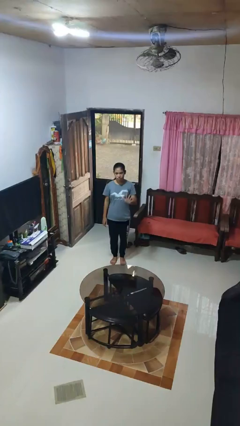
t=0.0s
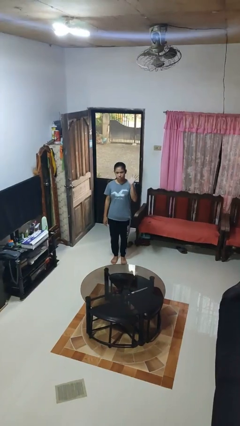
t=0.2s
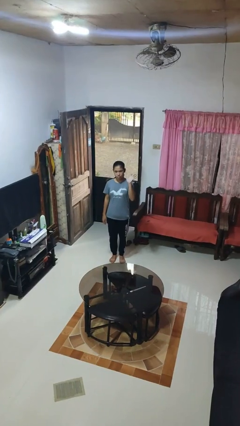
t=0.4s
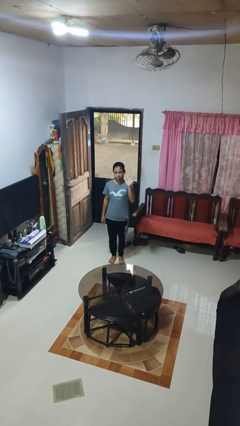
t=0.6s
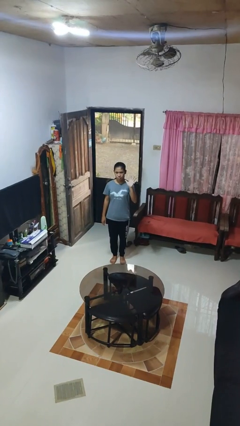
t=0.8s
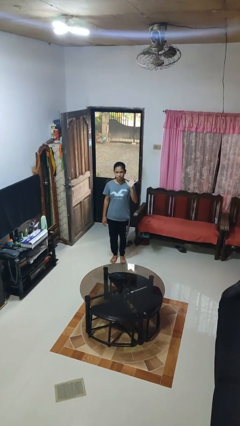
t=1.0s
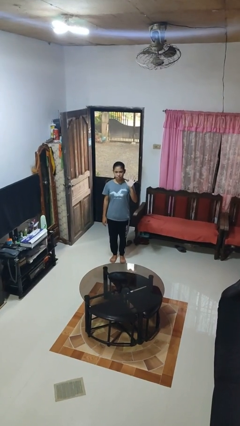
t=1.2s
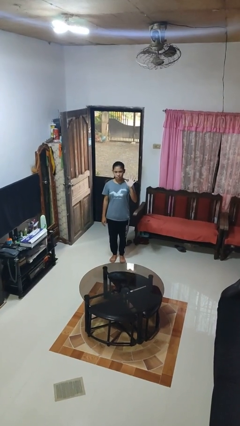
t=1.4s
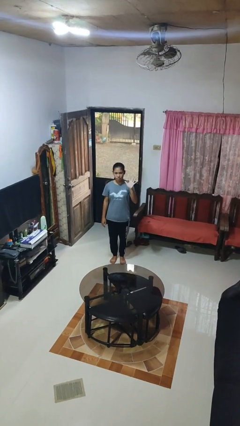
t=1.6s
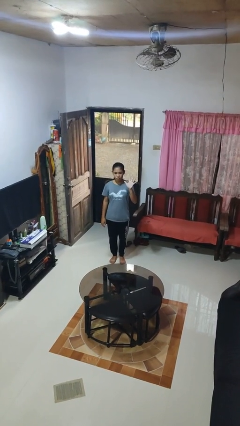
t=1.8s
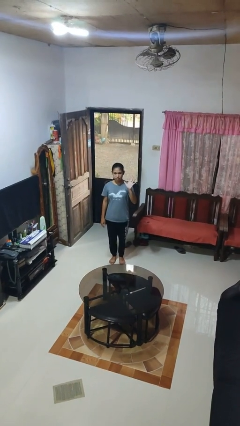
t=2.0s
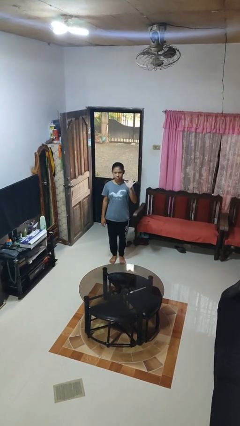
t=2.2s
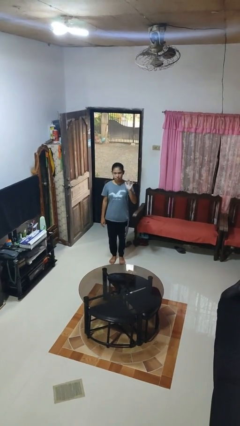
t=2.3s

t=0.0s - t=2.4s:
person gestures number five

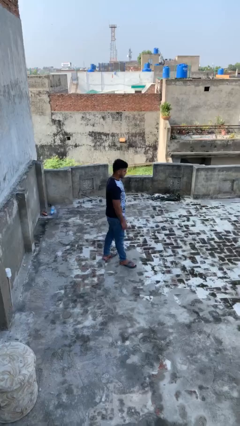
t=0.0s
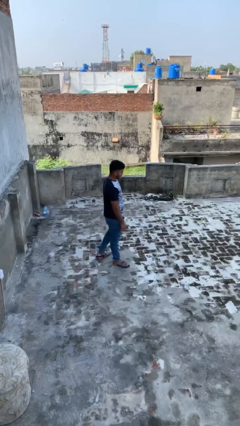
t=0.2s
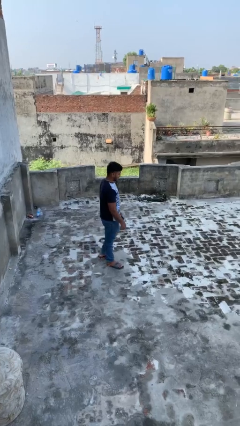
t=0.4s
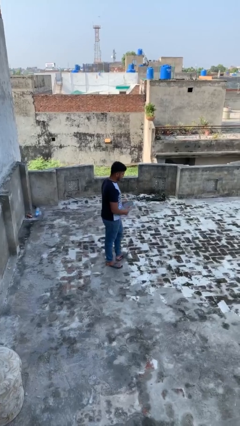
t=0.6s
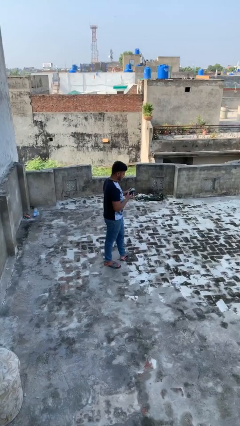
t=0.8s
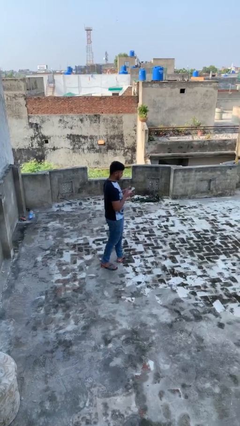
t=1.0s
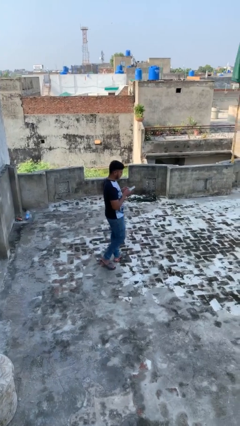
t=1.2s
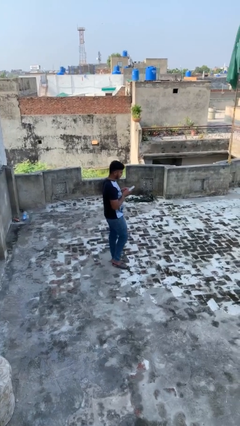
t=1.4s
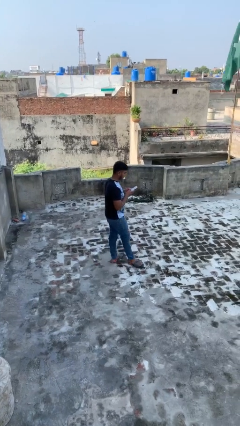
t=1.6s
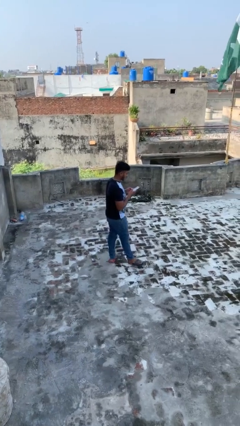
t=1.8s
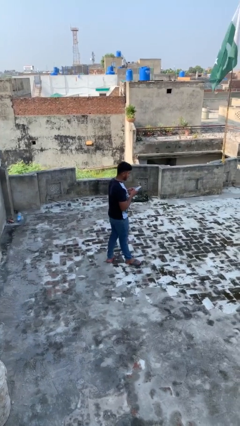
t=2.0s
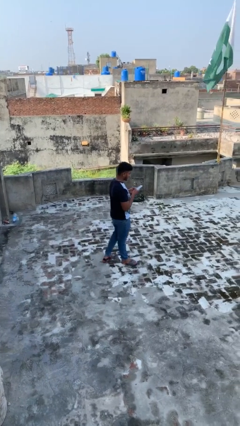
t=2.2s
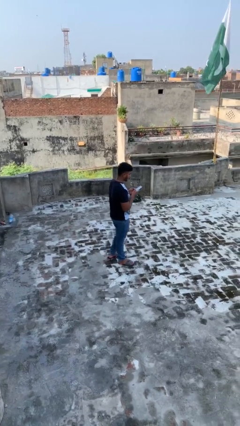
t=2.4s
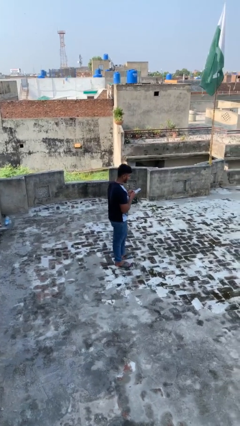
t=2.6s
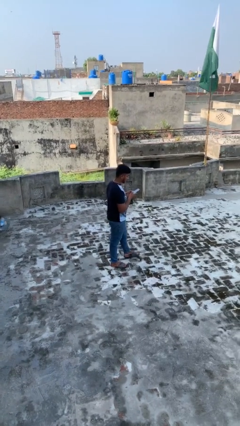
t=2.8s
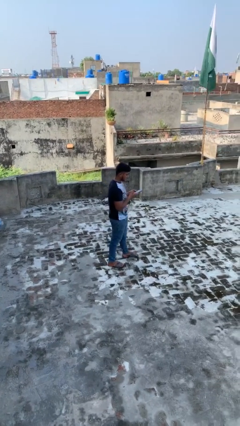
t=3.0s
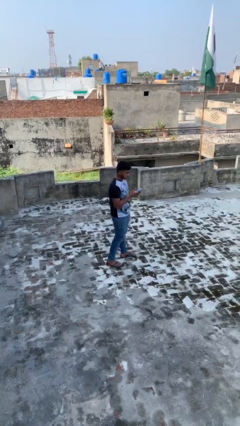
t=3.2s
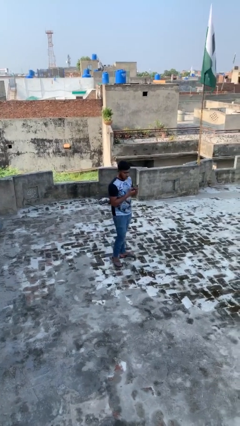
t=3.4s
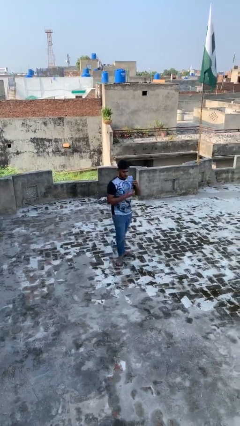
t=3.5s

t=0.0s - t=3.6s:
person texts on phone

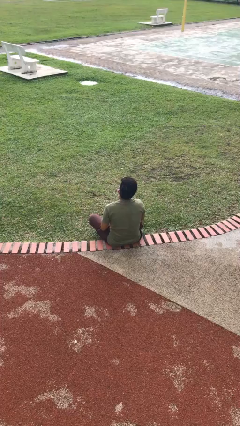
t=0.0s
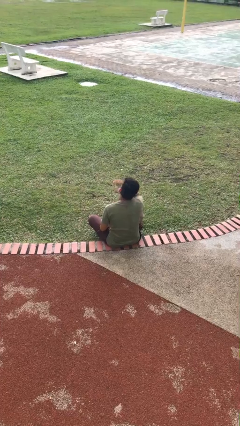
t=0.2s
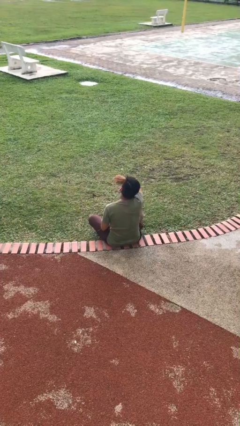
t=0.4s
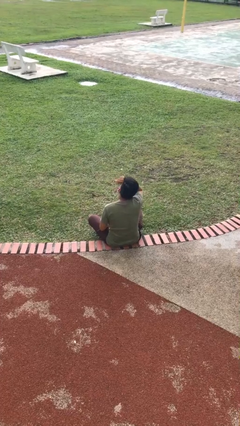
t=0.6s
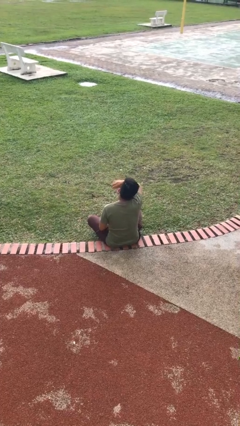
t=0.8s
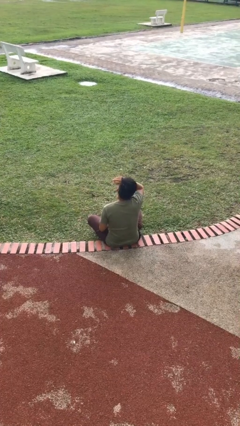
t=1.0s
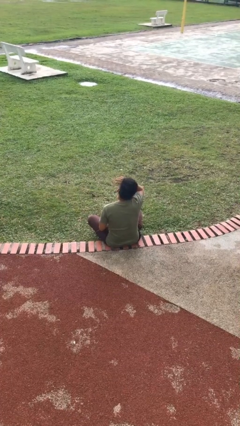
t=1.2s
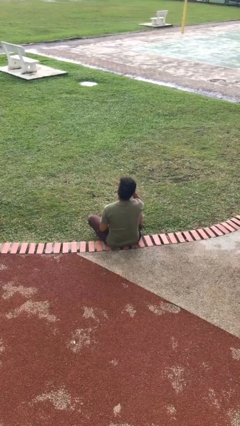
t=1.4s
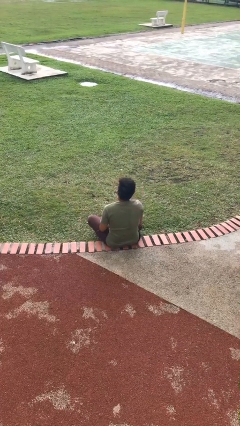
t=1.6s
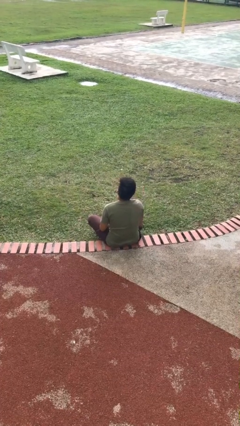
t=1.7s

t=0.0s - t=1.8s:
person rubs eyes

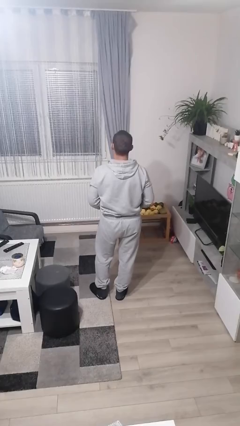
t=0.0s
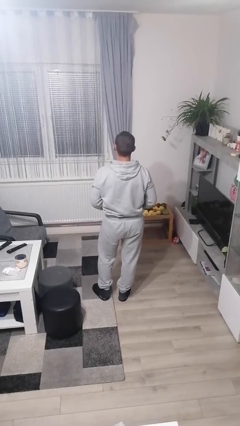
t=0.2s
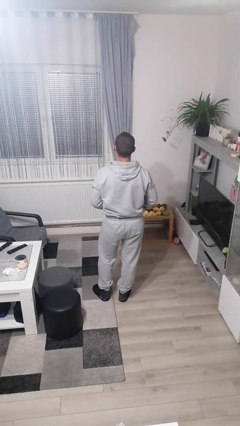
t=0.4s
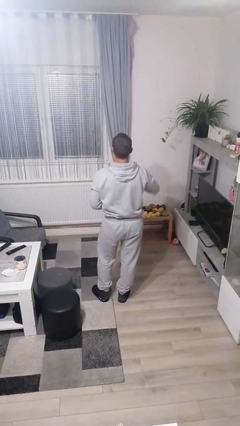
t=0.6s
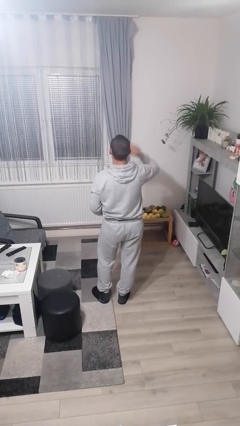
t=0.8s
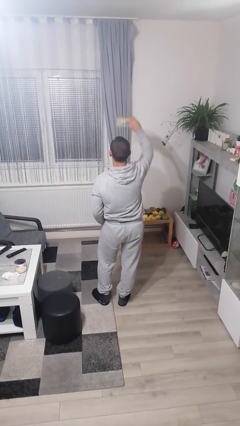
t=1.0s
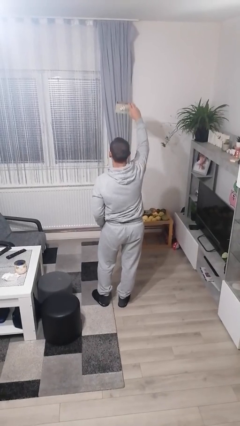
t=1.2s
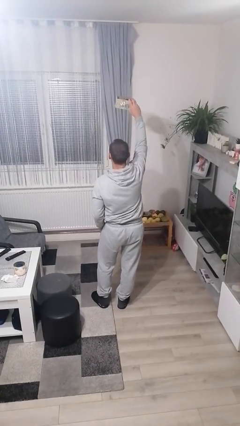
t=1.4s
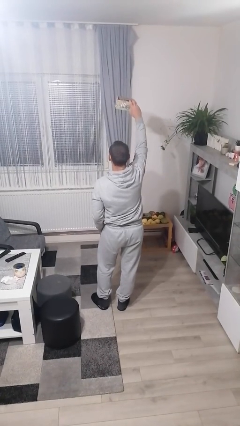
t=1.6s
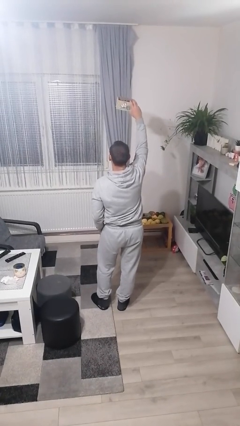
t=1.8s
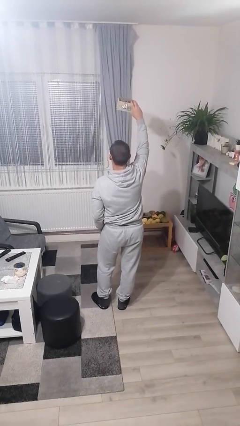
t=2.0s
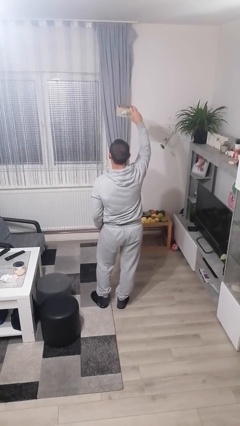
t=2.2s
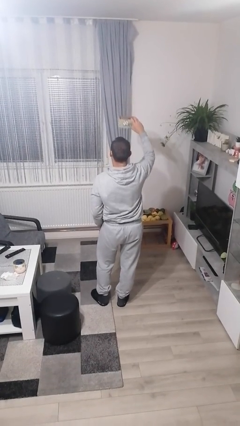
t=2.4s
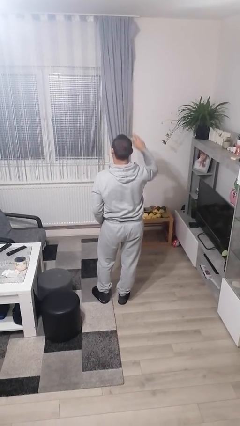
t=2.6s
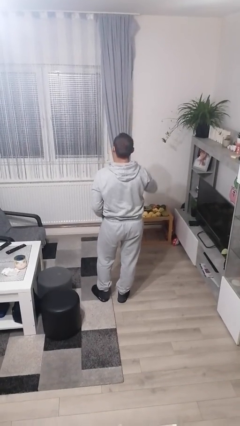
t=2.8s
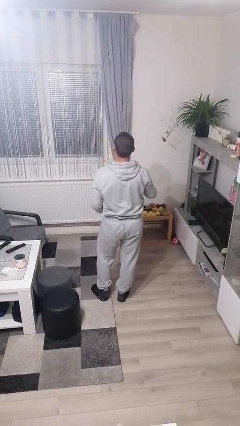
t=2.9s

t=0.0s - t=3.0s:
person holds object above head

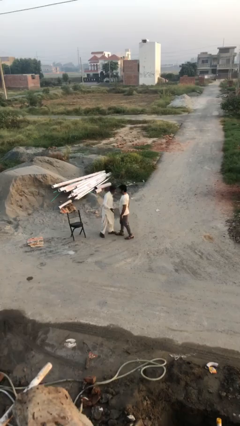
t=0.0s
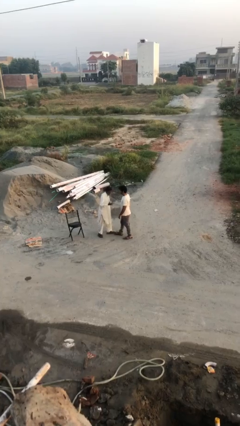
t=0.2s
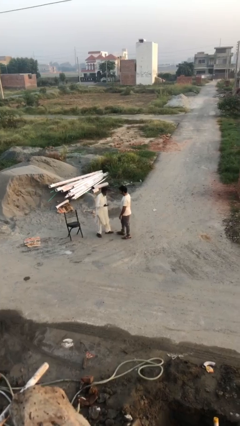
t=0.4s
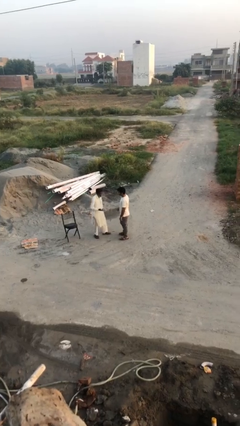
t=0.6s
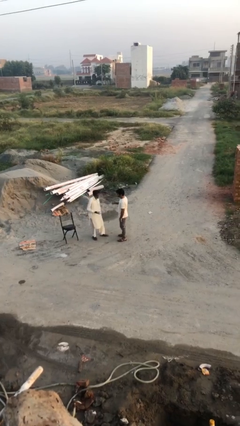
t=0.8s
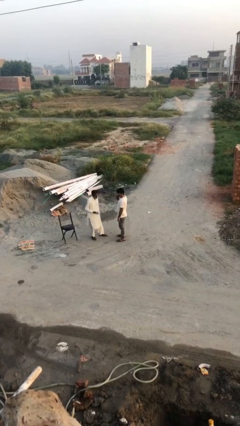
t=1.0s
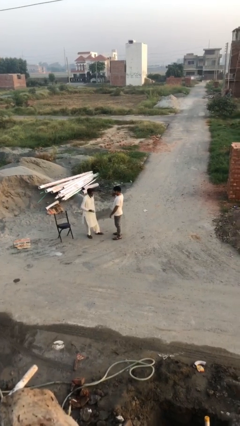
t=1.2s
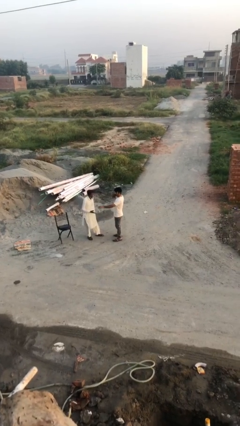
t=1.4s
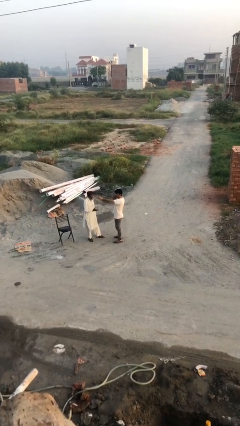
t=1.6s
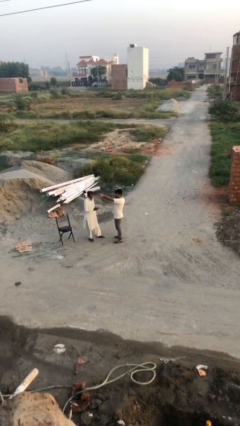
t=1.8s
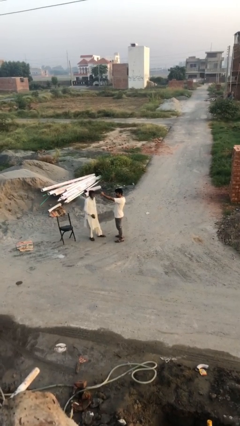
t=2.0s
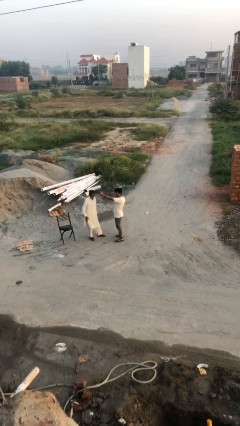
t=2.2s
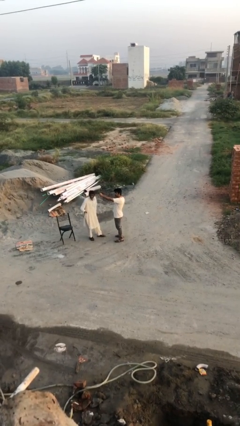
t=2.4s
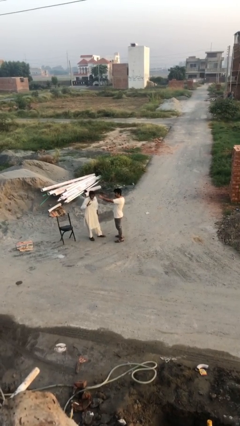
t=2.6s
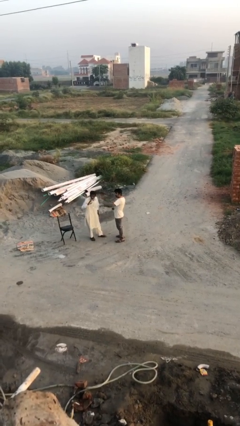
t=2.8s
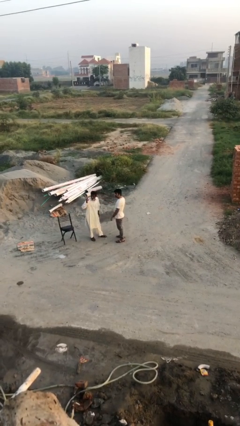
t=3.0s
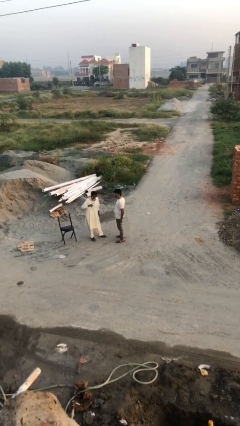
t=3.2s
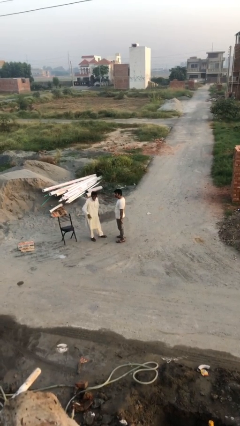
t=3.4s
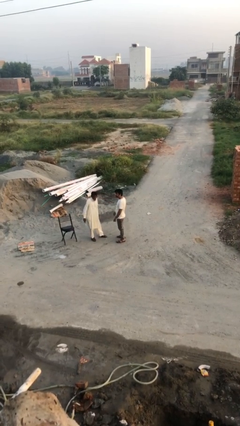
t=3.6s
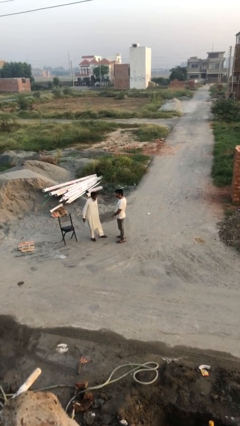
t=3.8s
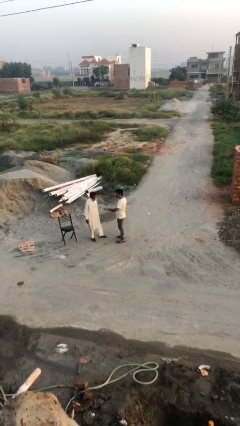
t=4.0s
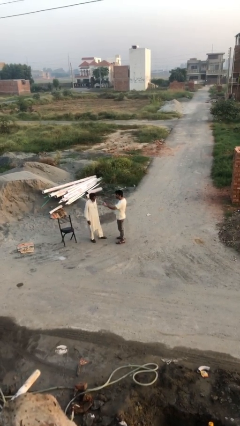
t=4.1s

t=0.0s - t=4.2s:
person talks to person

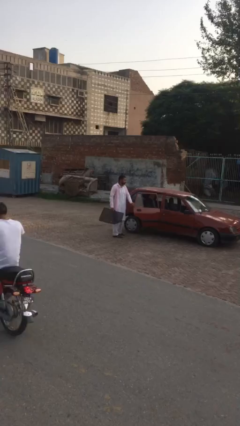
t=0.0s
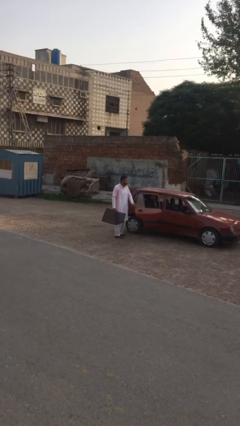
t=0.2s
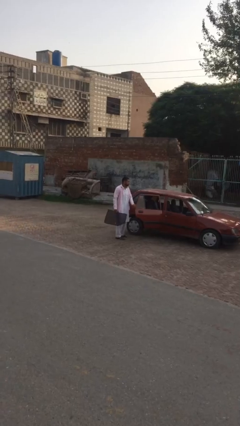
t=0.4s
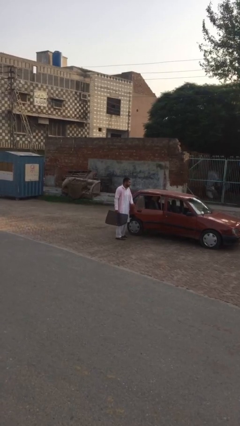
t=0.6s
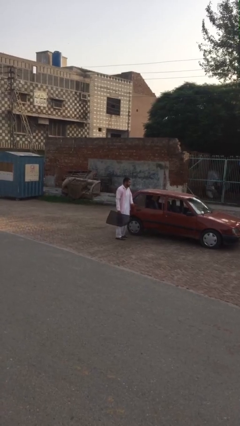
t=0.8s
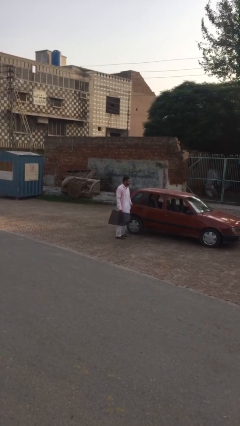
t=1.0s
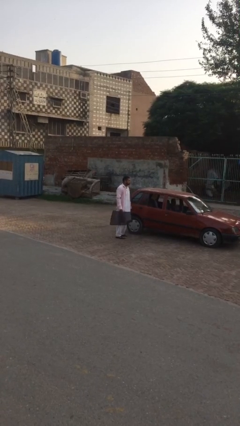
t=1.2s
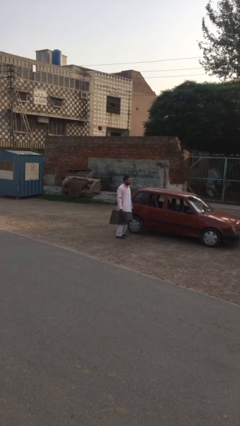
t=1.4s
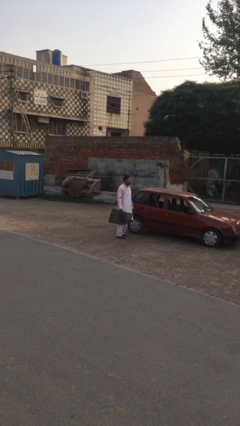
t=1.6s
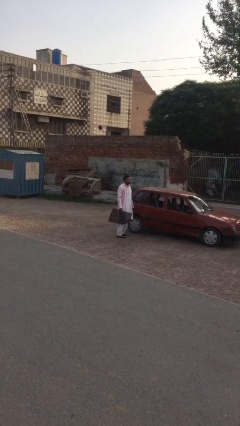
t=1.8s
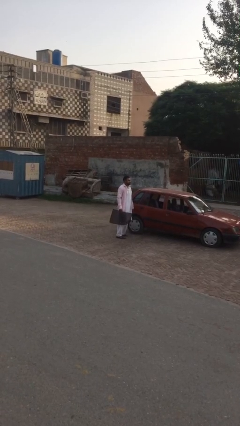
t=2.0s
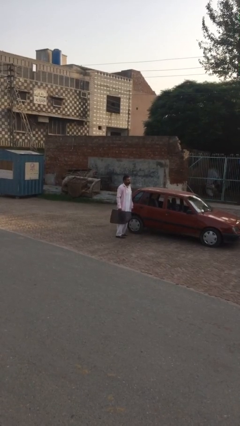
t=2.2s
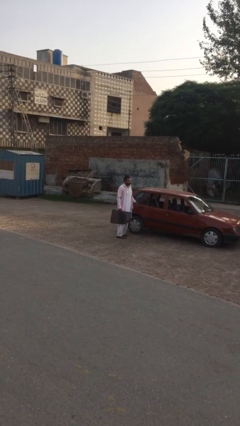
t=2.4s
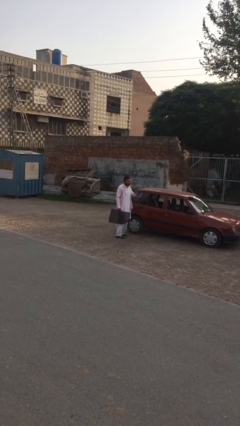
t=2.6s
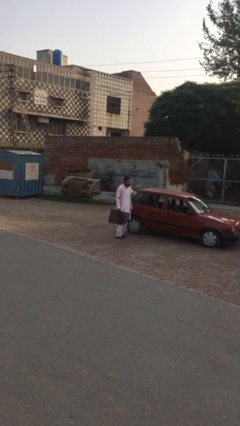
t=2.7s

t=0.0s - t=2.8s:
person closes car door
